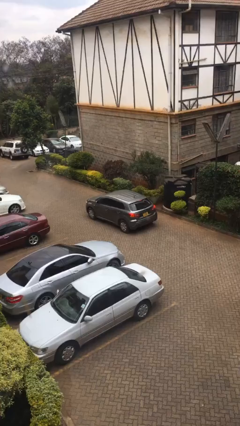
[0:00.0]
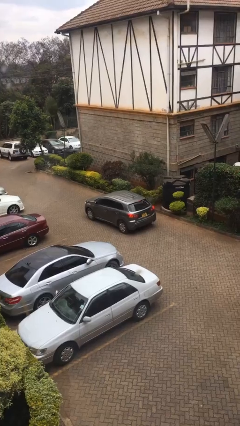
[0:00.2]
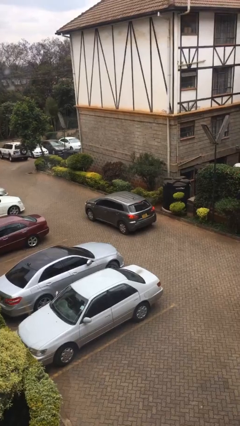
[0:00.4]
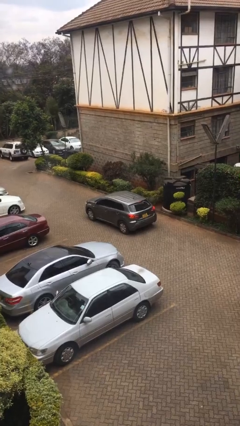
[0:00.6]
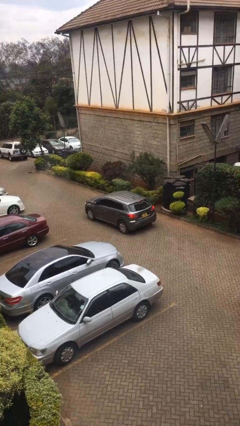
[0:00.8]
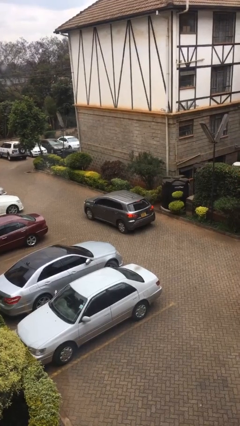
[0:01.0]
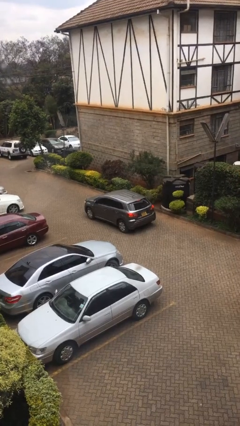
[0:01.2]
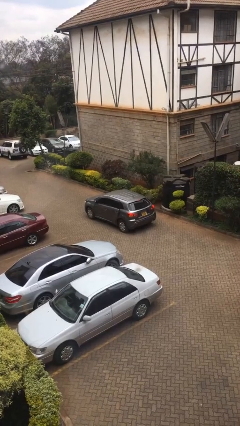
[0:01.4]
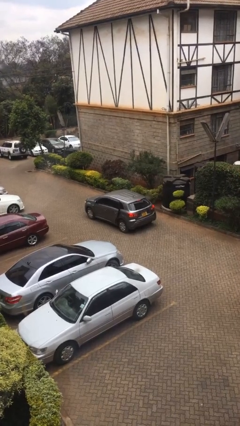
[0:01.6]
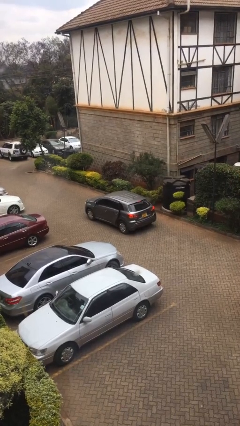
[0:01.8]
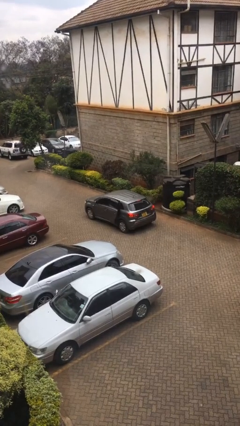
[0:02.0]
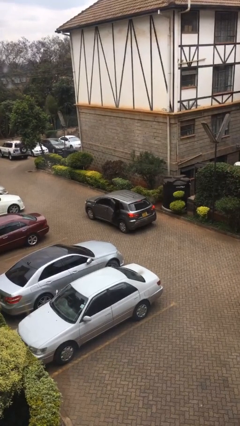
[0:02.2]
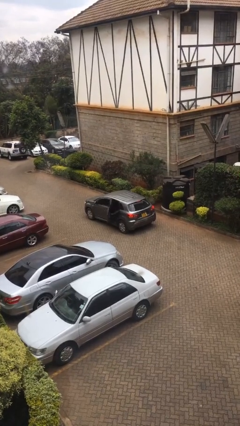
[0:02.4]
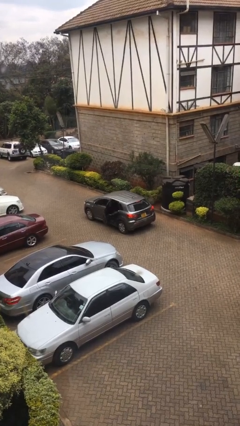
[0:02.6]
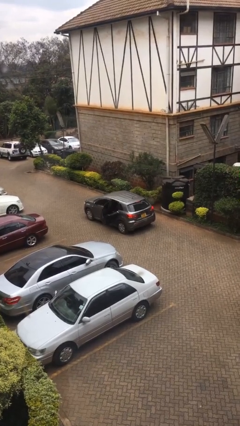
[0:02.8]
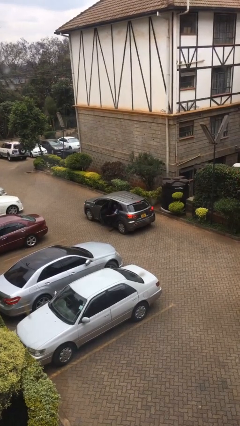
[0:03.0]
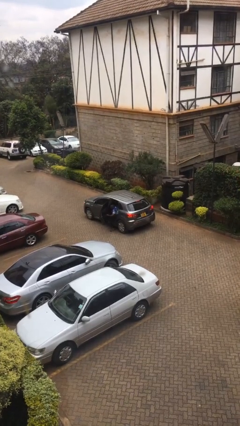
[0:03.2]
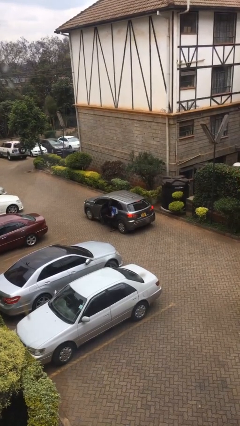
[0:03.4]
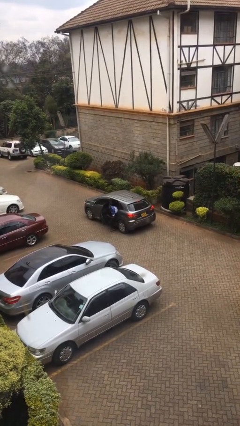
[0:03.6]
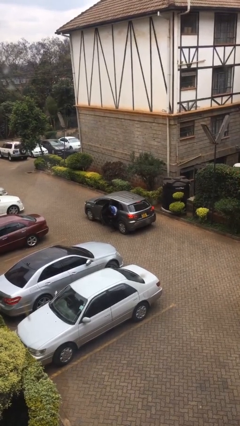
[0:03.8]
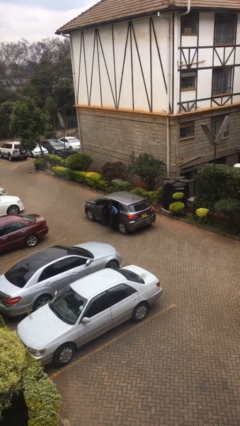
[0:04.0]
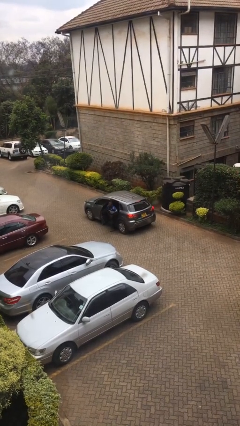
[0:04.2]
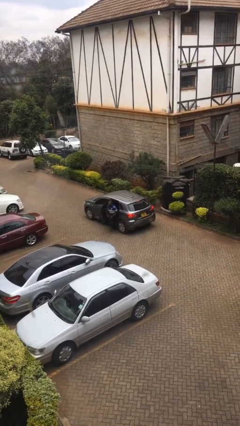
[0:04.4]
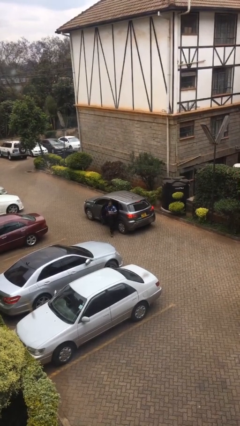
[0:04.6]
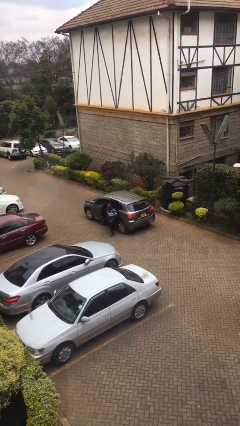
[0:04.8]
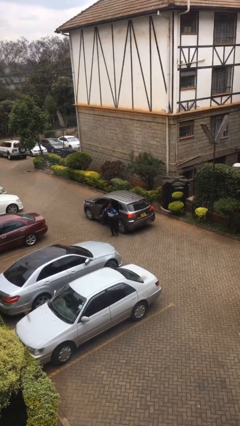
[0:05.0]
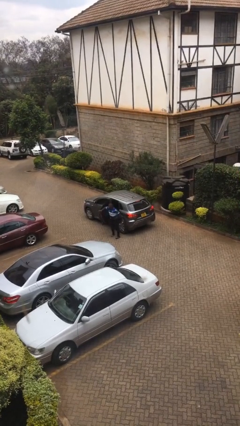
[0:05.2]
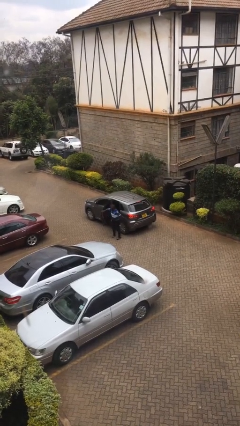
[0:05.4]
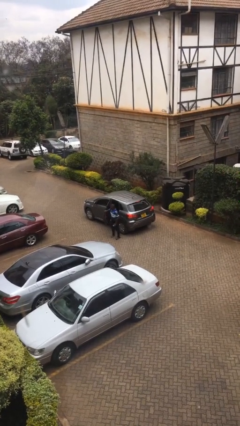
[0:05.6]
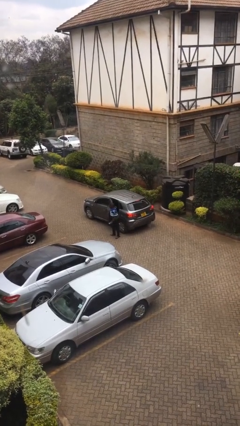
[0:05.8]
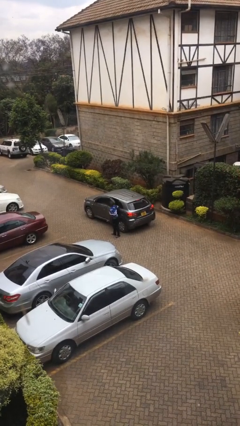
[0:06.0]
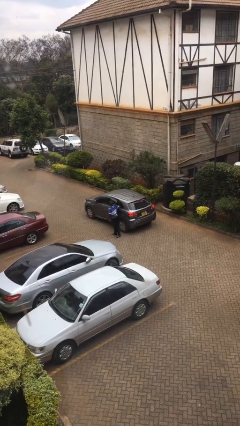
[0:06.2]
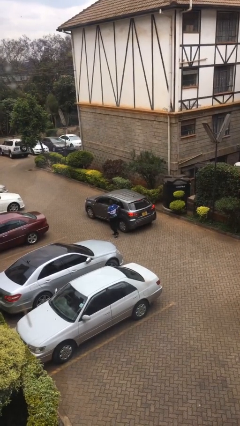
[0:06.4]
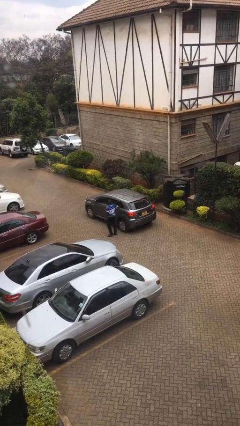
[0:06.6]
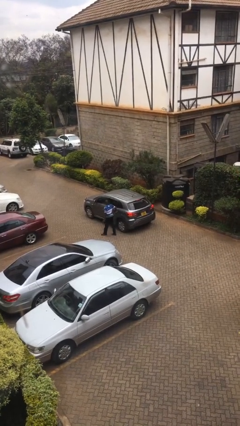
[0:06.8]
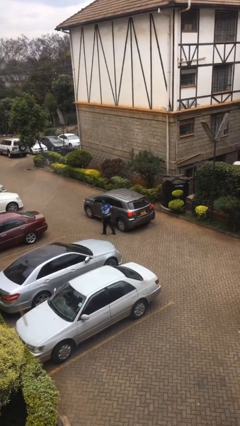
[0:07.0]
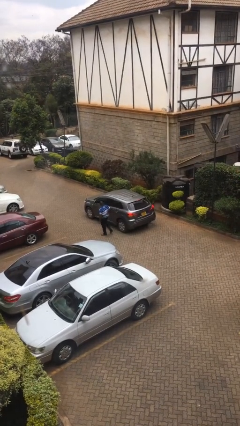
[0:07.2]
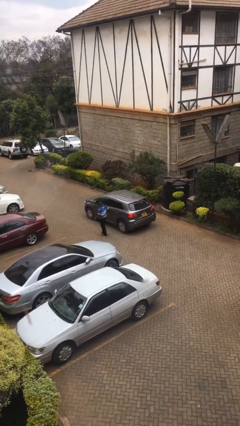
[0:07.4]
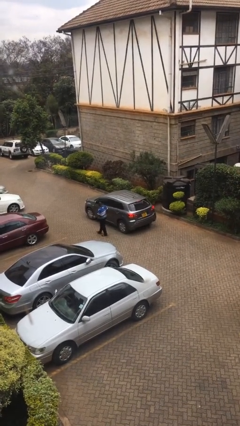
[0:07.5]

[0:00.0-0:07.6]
car drops off person

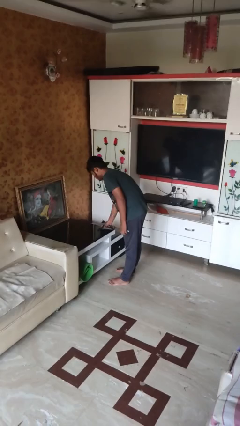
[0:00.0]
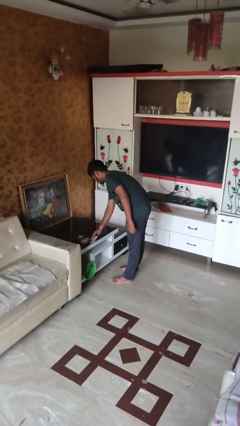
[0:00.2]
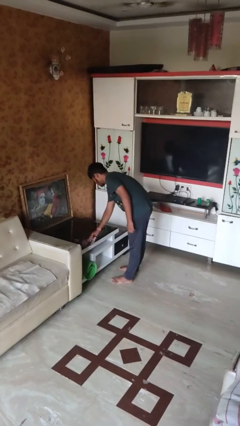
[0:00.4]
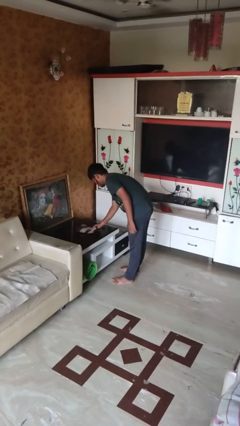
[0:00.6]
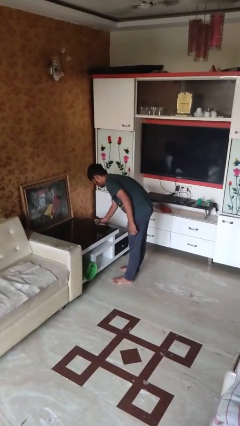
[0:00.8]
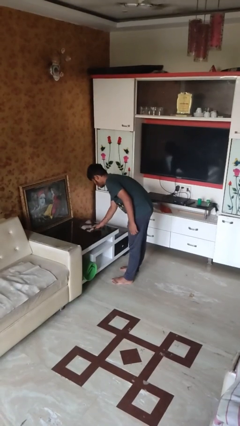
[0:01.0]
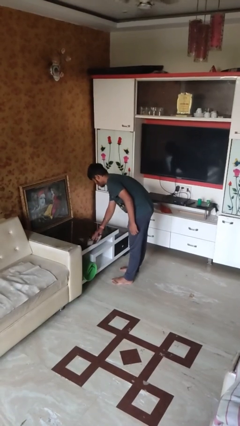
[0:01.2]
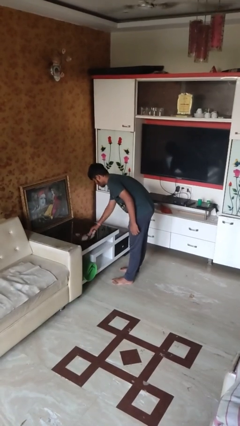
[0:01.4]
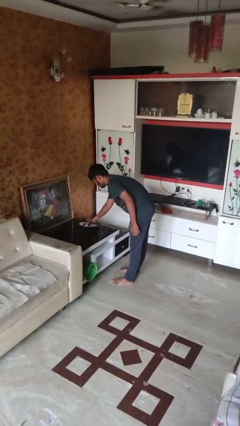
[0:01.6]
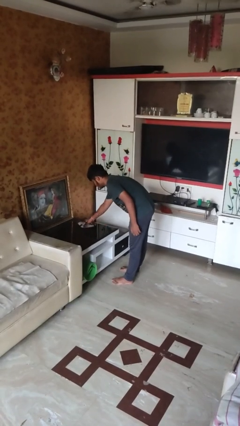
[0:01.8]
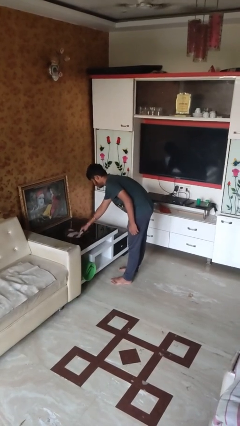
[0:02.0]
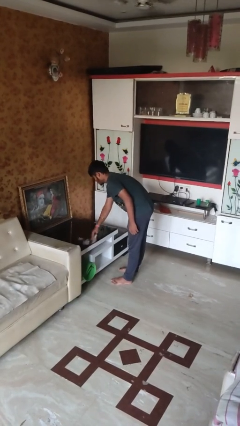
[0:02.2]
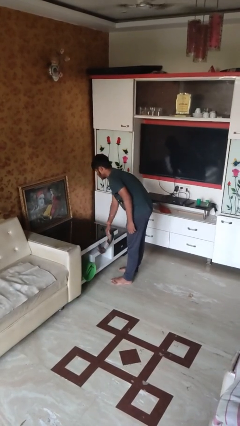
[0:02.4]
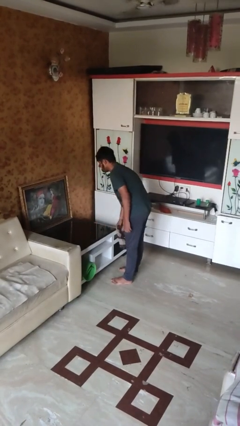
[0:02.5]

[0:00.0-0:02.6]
person cleans table with rag

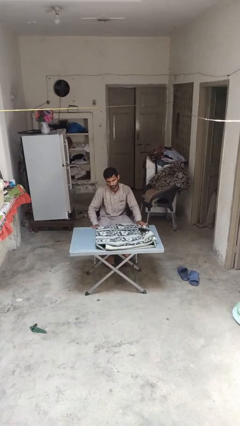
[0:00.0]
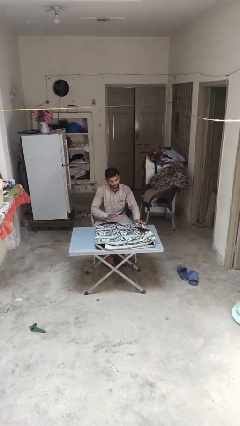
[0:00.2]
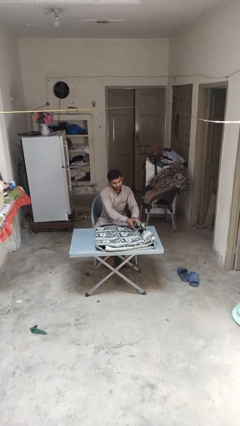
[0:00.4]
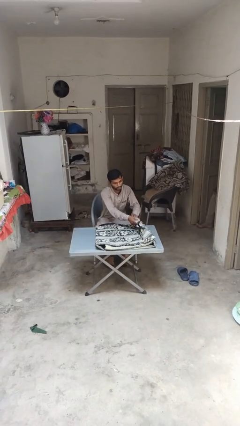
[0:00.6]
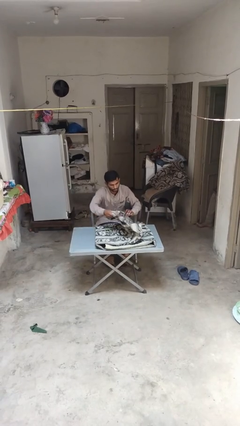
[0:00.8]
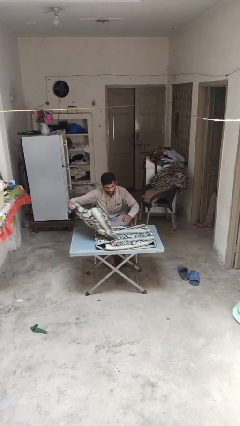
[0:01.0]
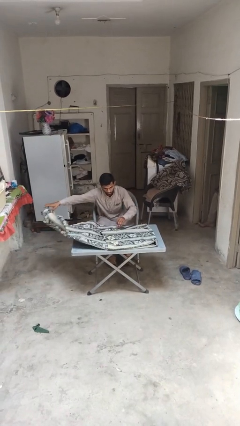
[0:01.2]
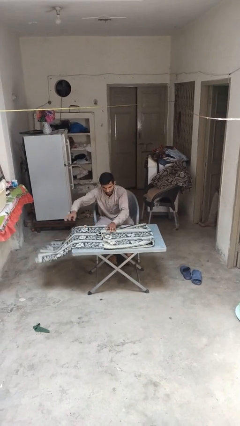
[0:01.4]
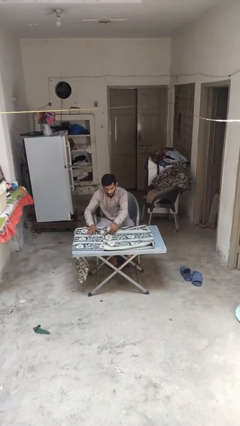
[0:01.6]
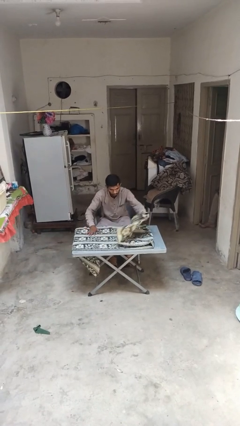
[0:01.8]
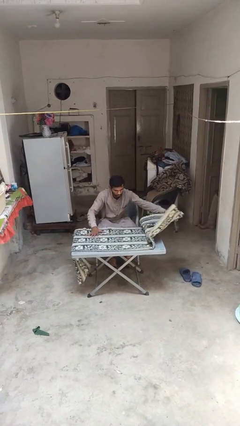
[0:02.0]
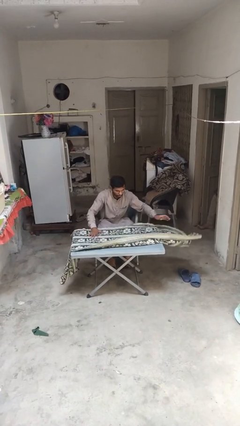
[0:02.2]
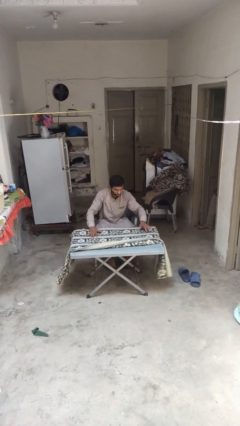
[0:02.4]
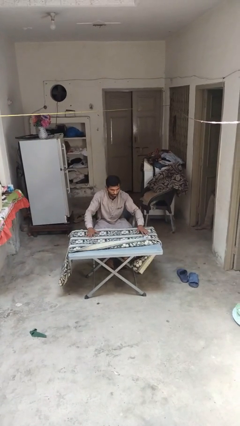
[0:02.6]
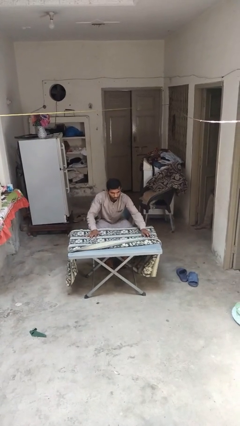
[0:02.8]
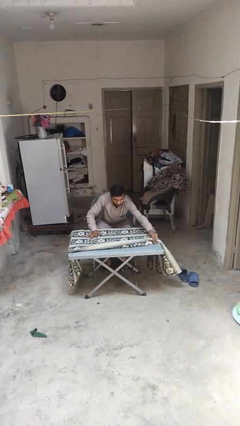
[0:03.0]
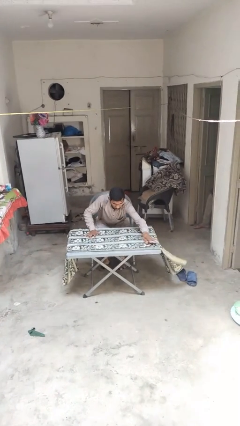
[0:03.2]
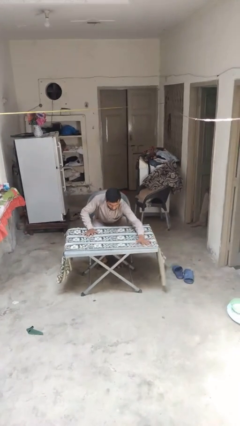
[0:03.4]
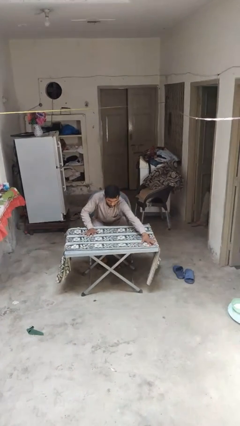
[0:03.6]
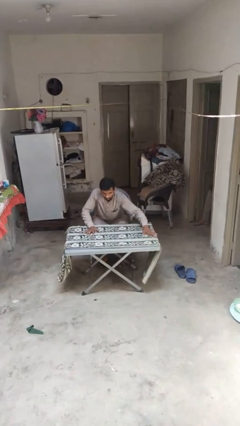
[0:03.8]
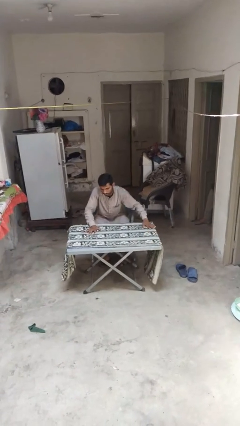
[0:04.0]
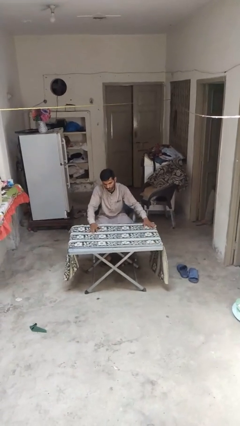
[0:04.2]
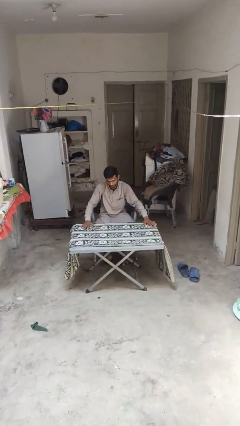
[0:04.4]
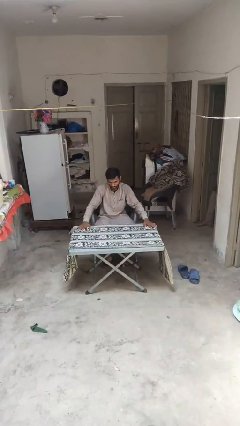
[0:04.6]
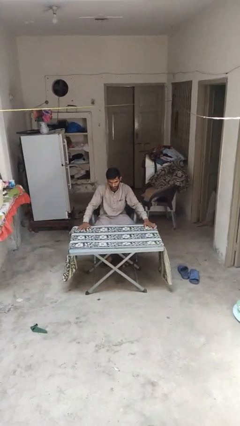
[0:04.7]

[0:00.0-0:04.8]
person spreads tablecloth

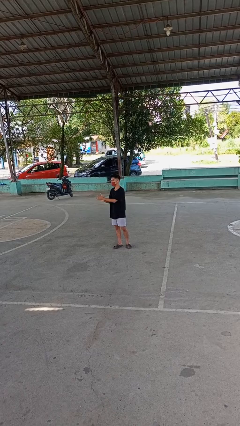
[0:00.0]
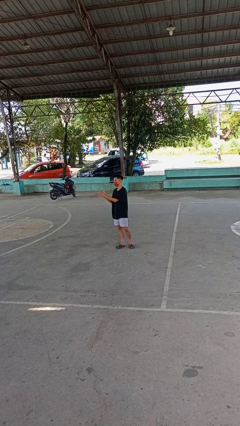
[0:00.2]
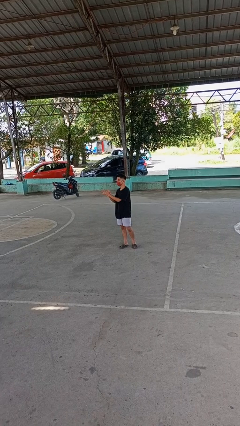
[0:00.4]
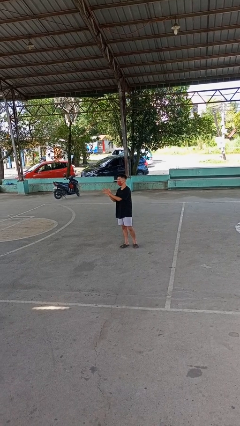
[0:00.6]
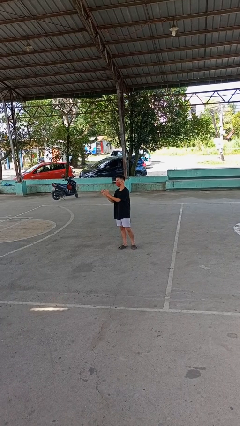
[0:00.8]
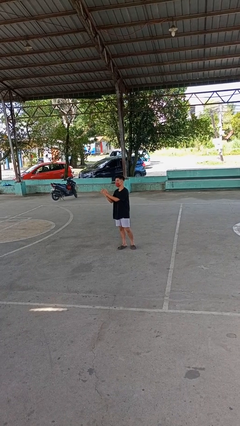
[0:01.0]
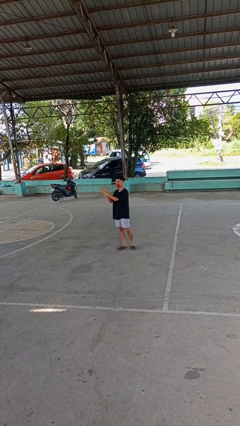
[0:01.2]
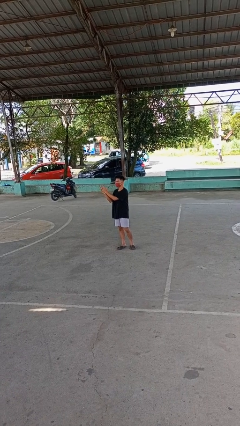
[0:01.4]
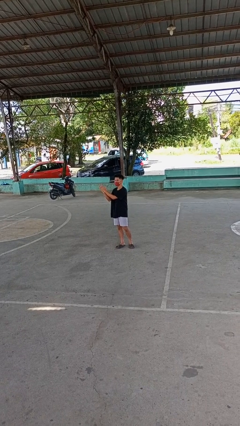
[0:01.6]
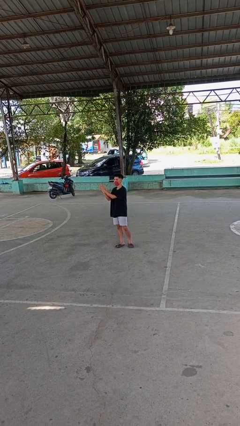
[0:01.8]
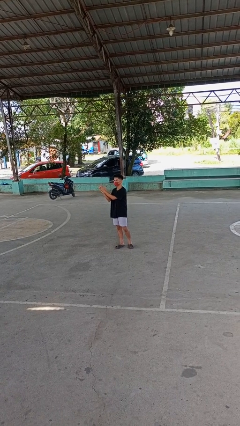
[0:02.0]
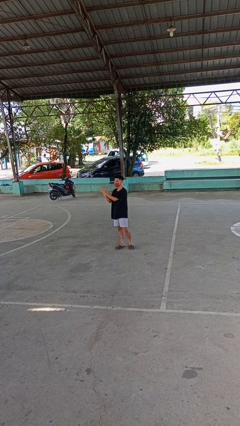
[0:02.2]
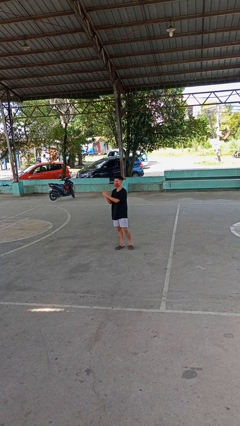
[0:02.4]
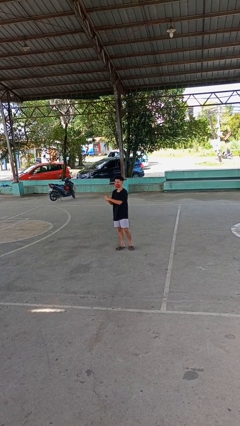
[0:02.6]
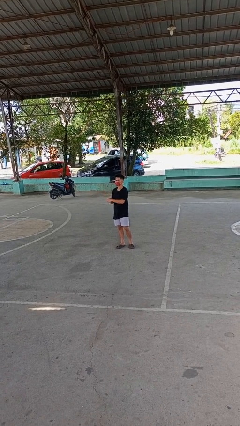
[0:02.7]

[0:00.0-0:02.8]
person claps hands
